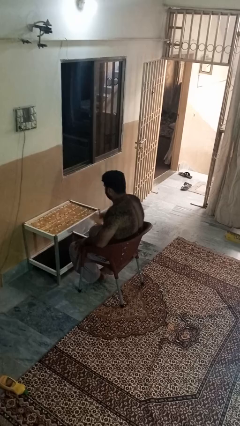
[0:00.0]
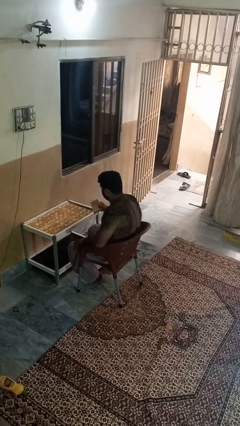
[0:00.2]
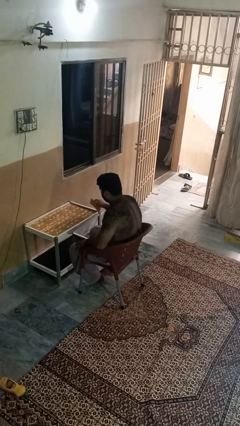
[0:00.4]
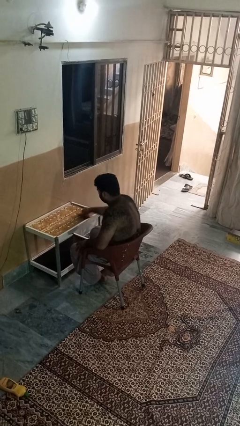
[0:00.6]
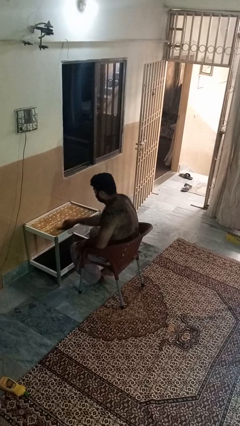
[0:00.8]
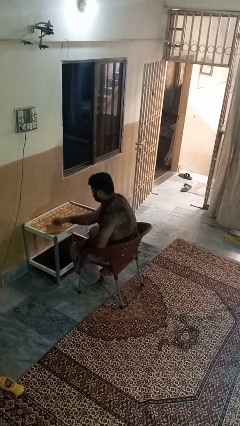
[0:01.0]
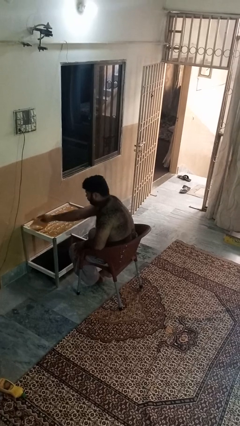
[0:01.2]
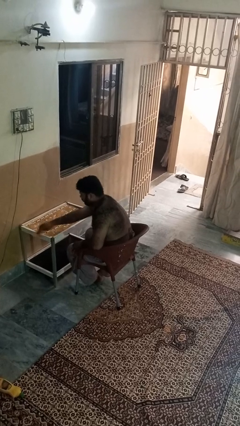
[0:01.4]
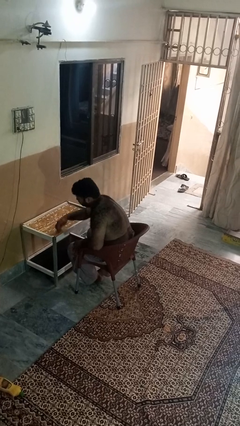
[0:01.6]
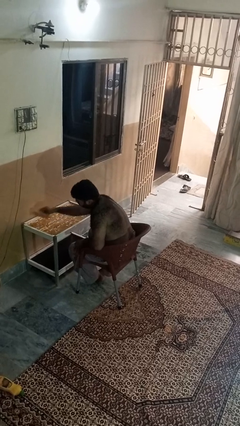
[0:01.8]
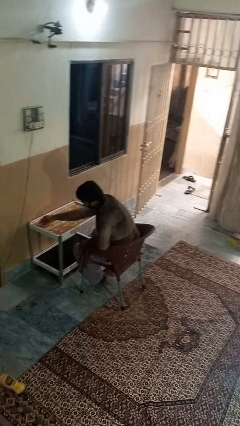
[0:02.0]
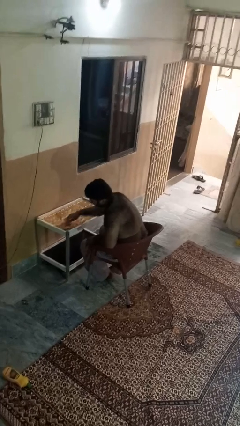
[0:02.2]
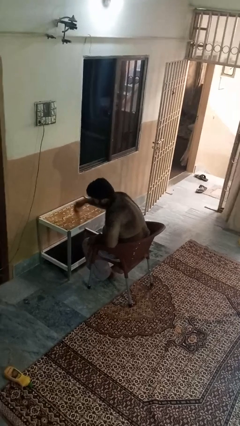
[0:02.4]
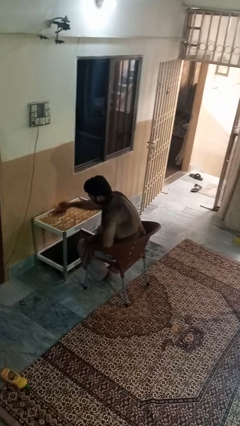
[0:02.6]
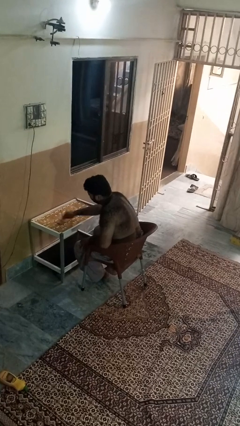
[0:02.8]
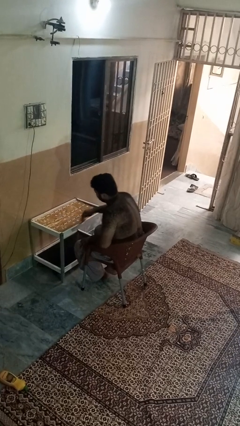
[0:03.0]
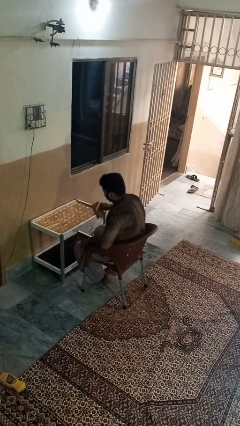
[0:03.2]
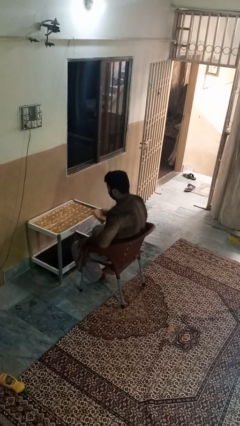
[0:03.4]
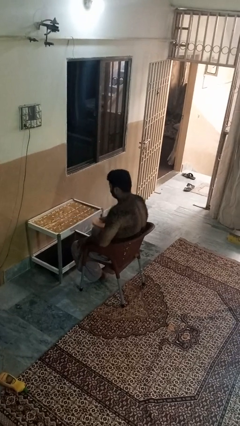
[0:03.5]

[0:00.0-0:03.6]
person cleans table with rag

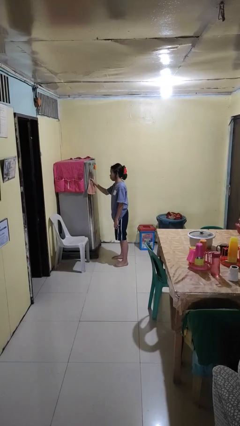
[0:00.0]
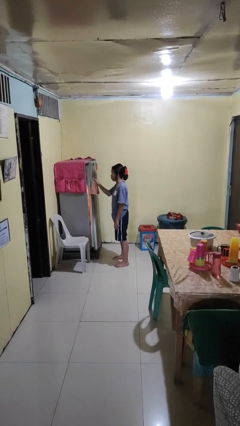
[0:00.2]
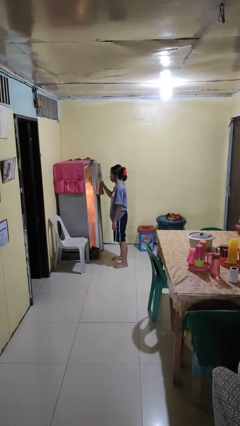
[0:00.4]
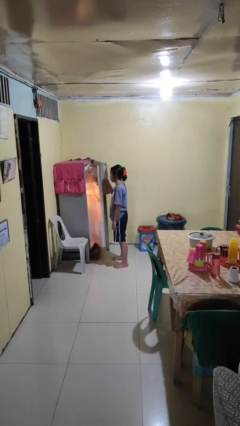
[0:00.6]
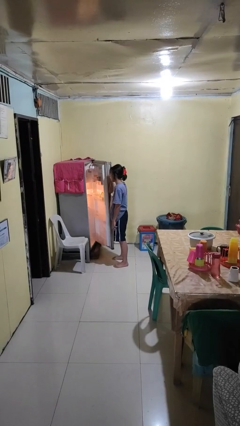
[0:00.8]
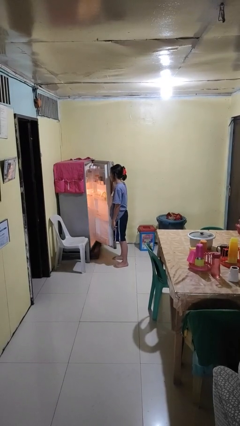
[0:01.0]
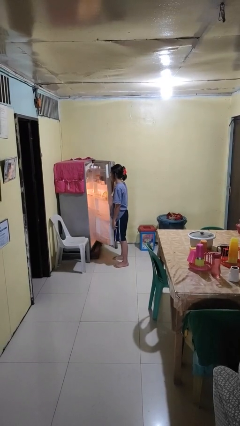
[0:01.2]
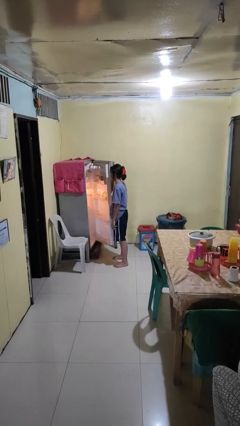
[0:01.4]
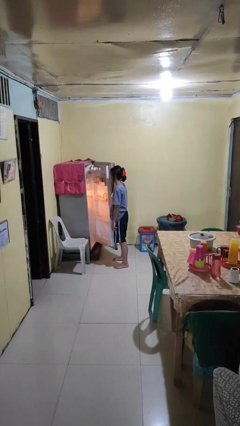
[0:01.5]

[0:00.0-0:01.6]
person opens refrigerator

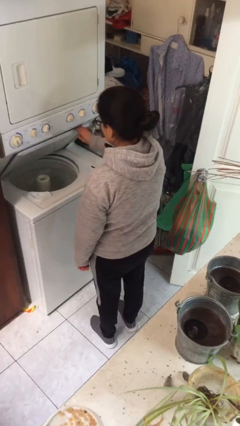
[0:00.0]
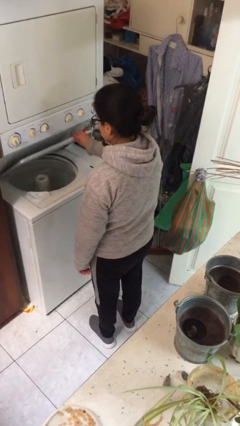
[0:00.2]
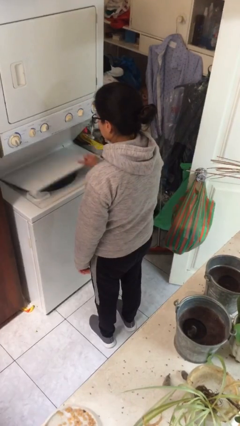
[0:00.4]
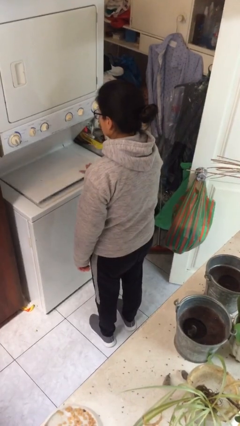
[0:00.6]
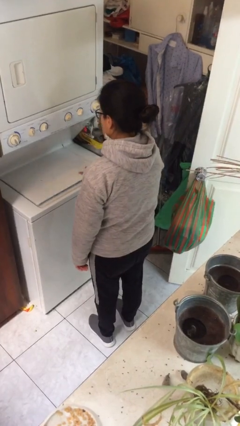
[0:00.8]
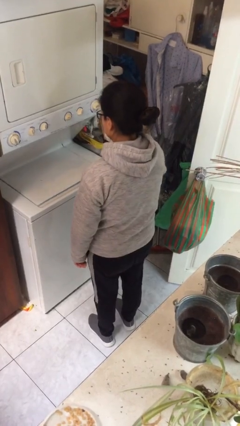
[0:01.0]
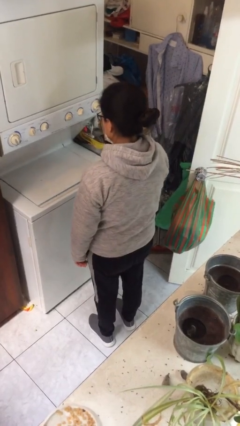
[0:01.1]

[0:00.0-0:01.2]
person closes clothes washer

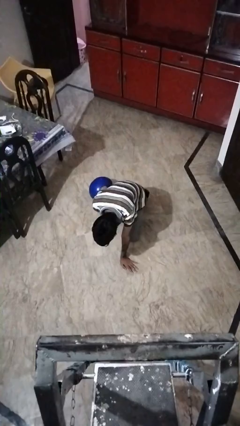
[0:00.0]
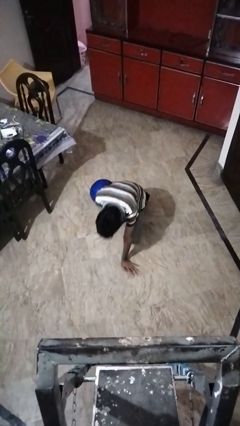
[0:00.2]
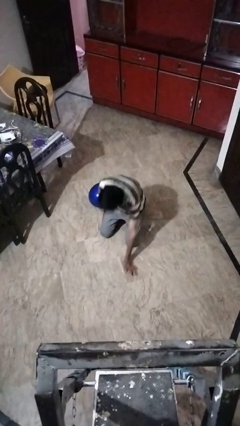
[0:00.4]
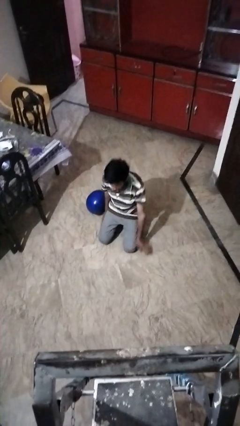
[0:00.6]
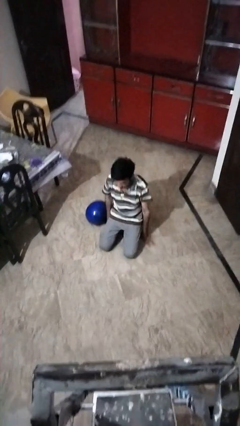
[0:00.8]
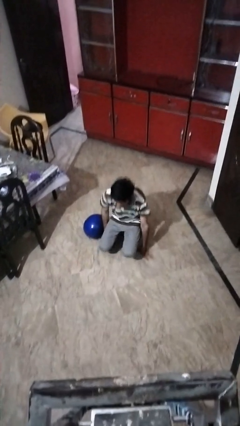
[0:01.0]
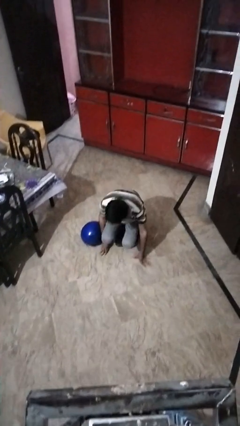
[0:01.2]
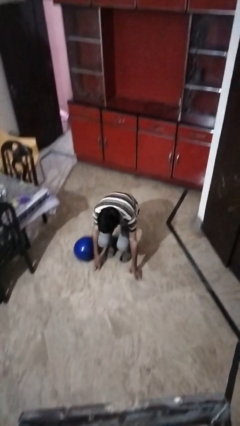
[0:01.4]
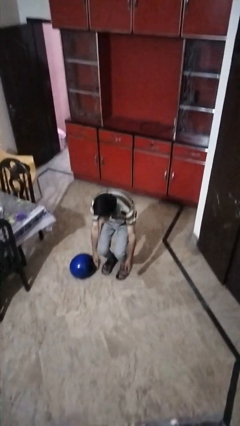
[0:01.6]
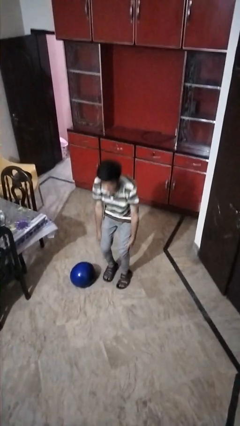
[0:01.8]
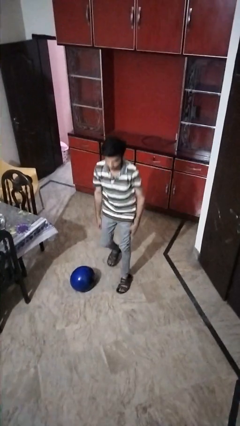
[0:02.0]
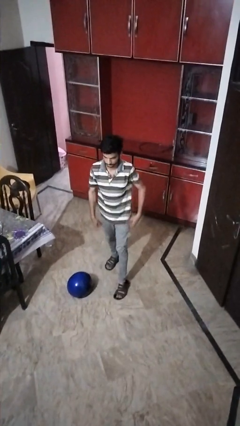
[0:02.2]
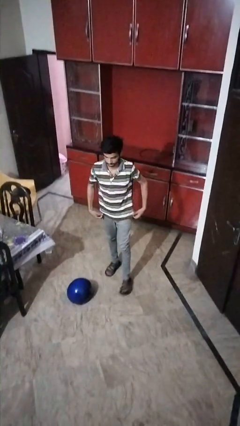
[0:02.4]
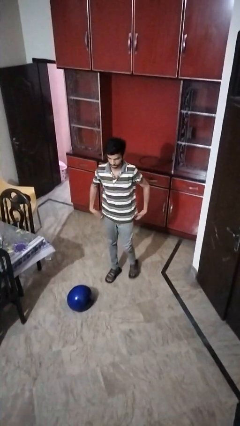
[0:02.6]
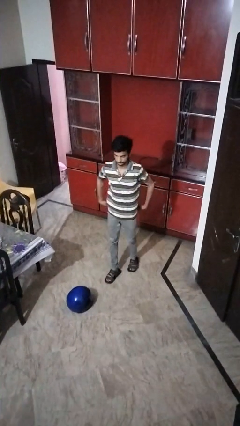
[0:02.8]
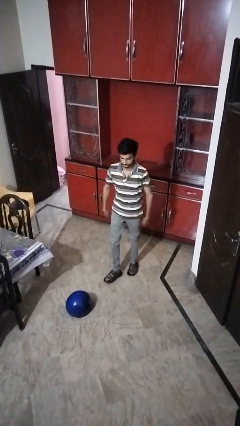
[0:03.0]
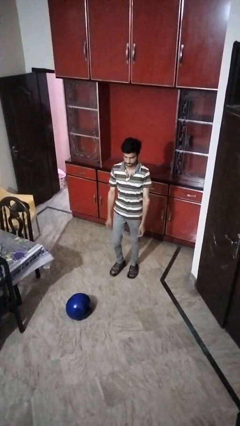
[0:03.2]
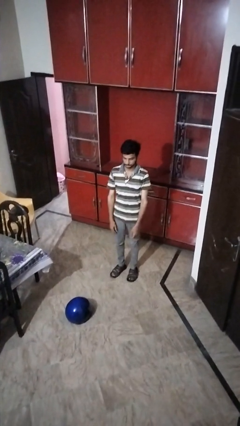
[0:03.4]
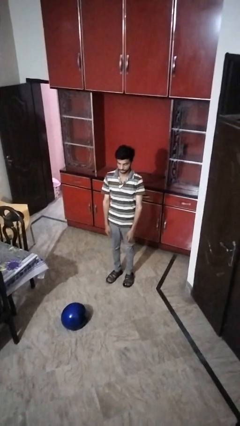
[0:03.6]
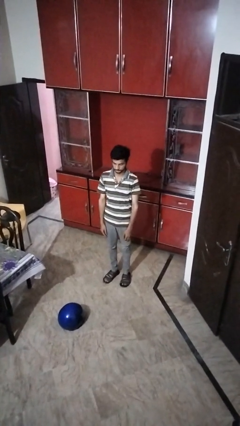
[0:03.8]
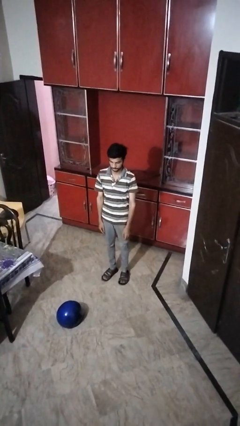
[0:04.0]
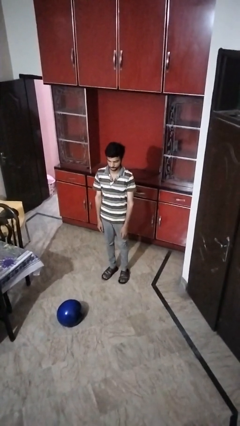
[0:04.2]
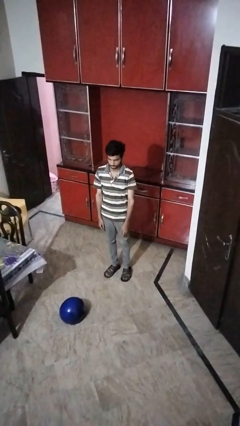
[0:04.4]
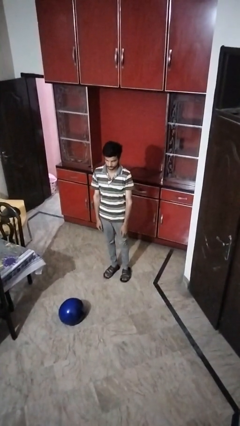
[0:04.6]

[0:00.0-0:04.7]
person stands up from floor

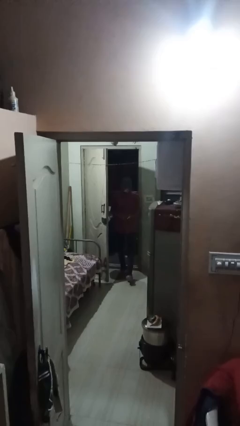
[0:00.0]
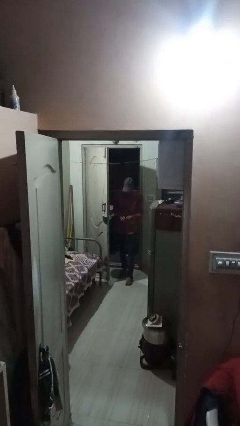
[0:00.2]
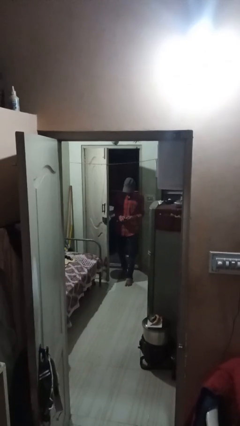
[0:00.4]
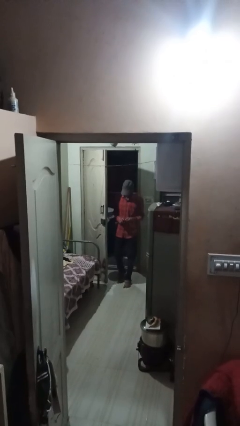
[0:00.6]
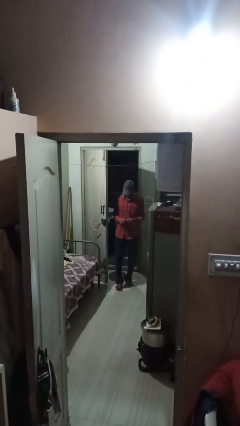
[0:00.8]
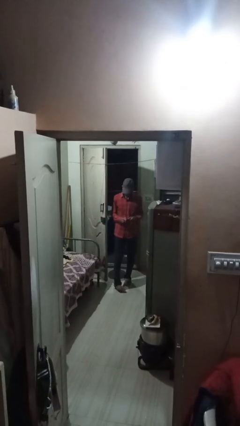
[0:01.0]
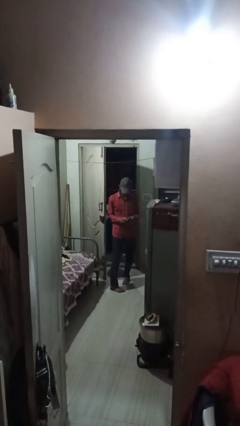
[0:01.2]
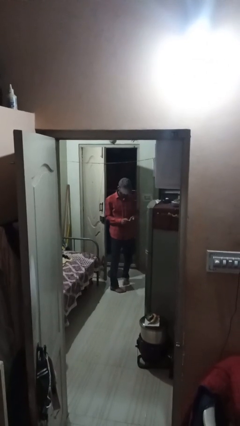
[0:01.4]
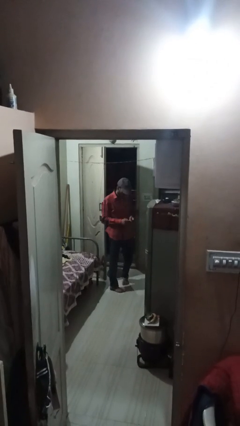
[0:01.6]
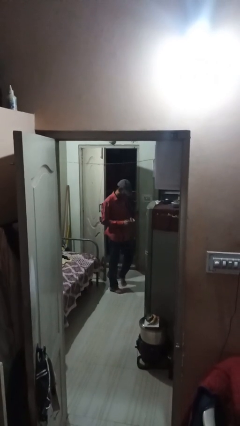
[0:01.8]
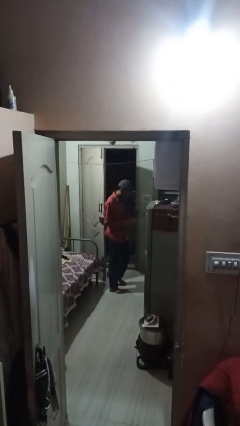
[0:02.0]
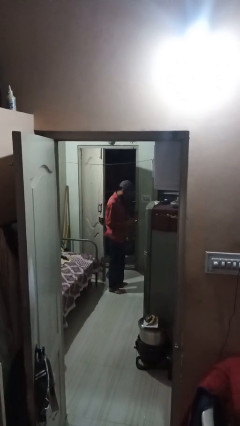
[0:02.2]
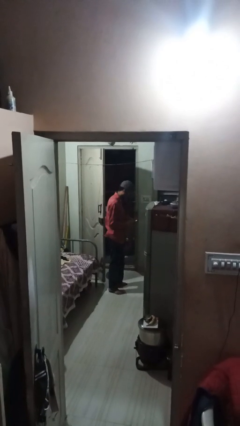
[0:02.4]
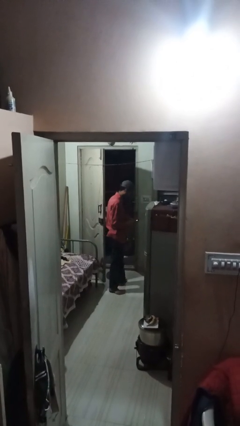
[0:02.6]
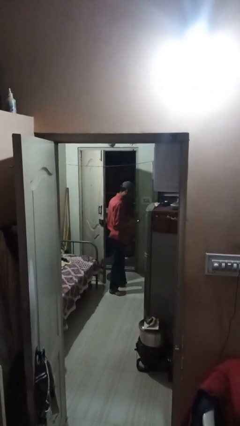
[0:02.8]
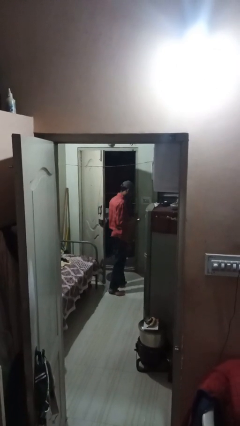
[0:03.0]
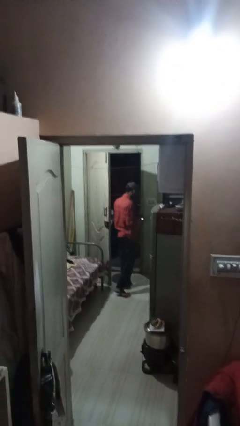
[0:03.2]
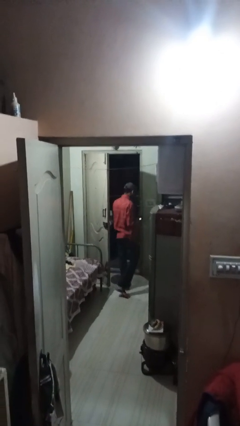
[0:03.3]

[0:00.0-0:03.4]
person enters scene through structure

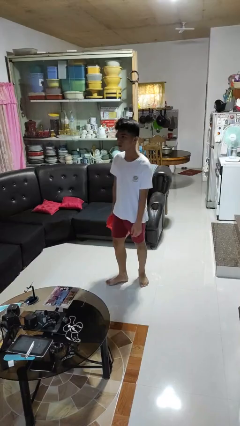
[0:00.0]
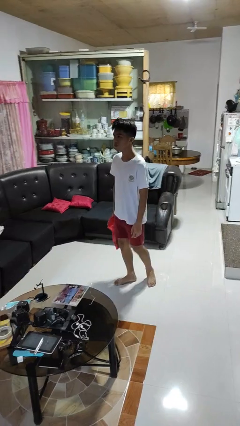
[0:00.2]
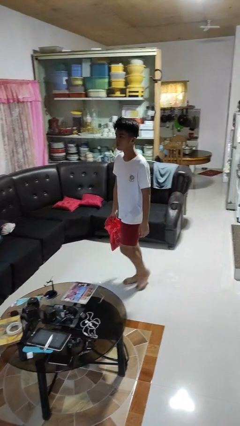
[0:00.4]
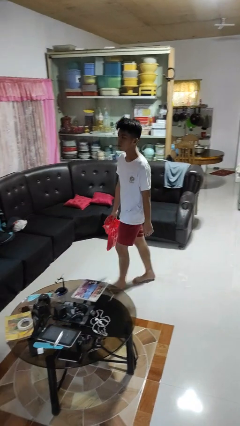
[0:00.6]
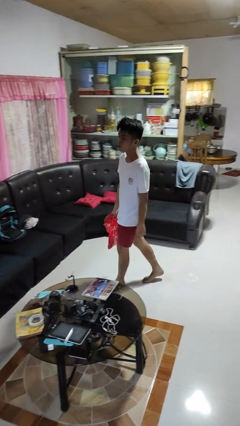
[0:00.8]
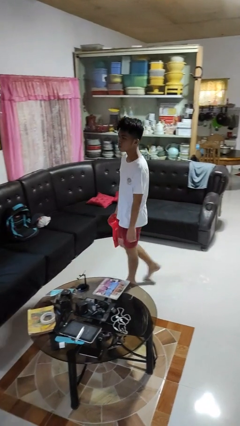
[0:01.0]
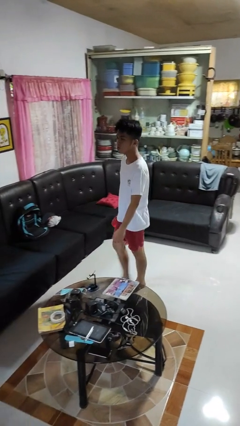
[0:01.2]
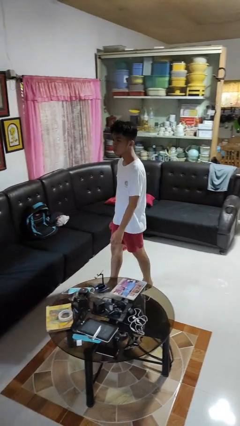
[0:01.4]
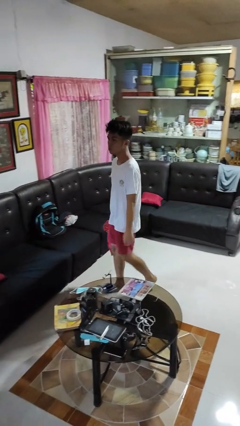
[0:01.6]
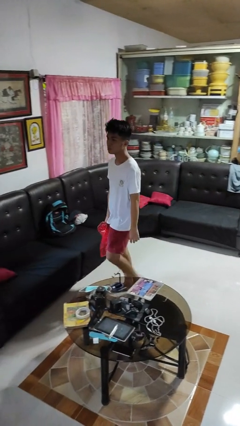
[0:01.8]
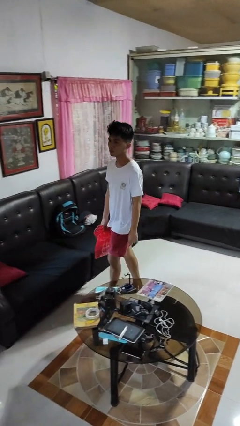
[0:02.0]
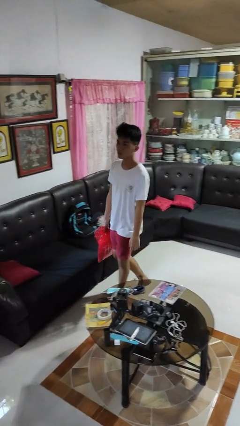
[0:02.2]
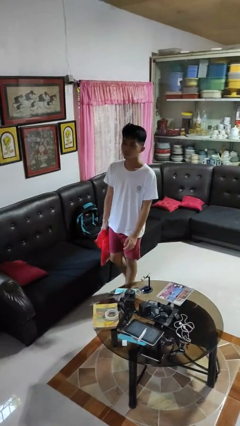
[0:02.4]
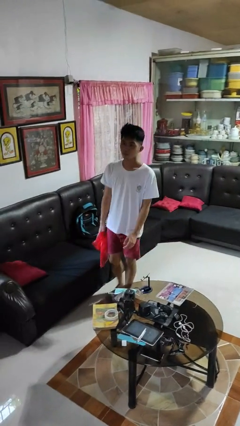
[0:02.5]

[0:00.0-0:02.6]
person carries groceries

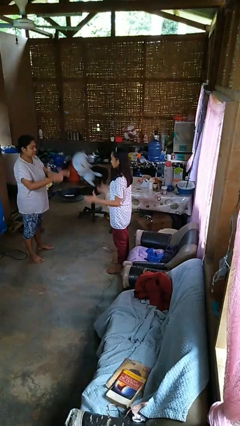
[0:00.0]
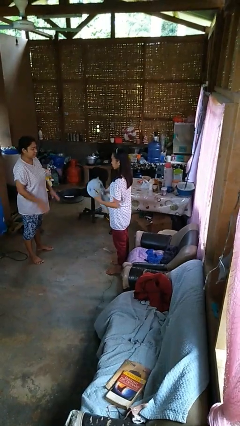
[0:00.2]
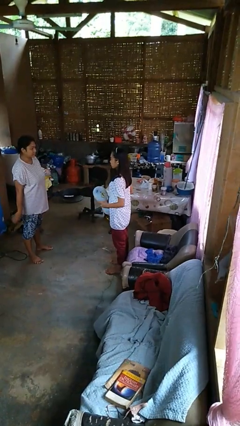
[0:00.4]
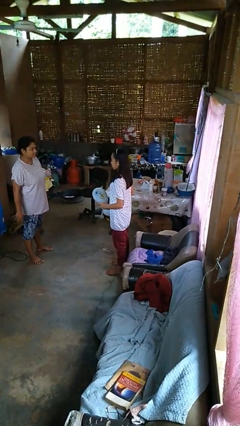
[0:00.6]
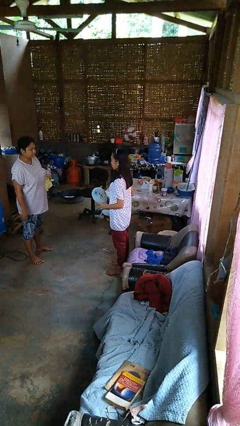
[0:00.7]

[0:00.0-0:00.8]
person catches object from person
